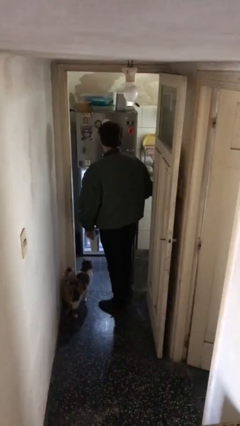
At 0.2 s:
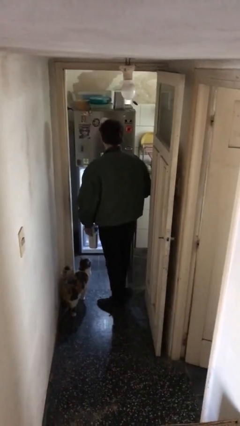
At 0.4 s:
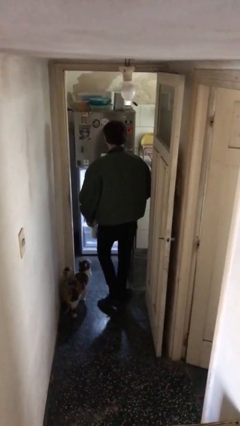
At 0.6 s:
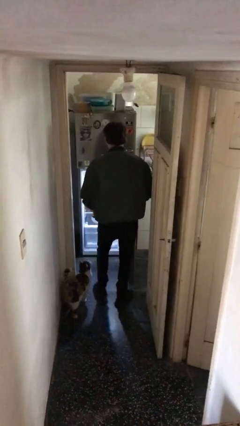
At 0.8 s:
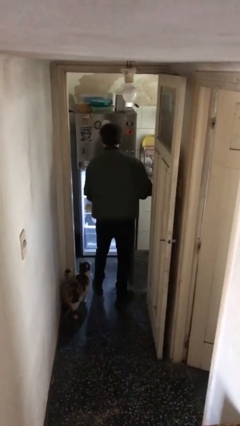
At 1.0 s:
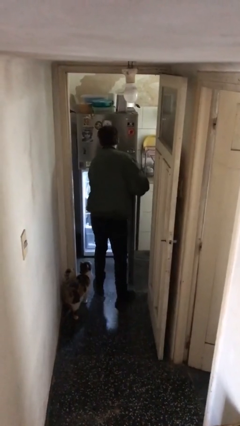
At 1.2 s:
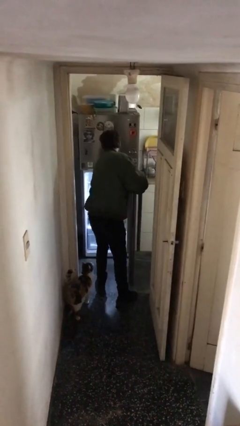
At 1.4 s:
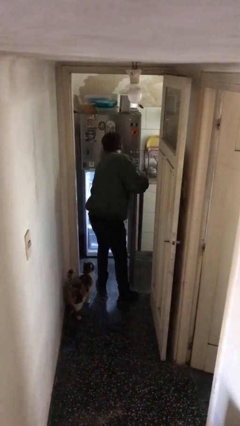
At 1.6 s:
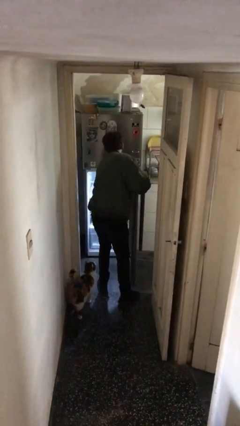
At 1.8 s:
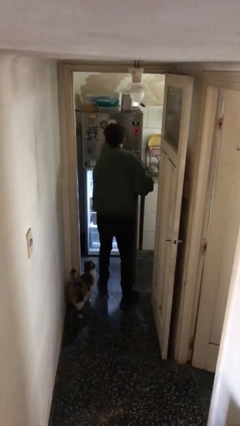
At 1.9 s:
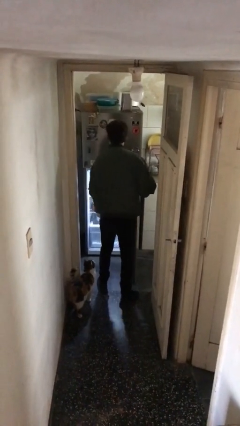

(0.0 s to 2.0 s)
person puts object into refrigerator

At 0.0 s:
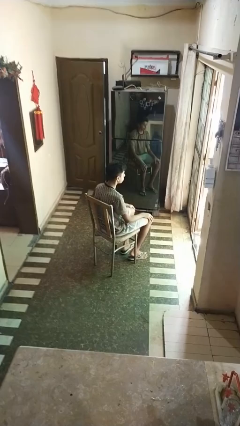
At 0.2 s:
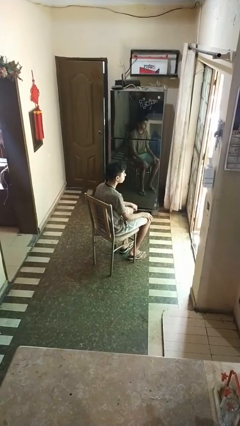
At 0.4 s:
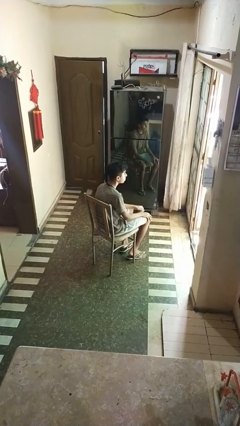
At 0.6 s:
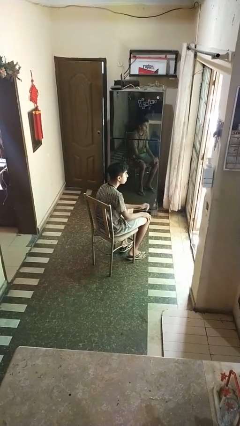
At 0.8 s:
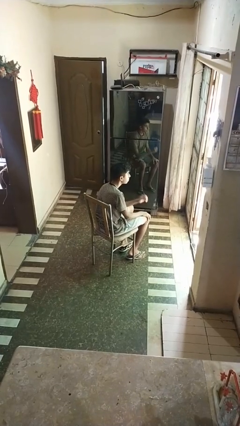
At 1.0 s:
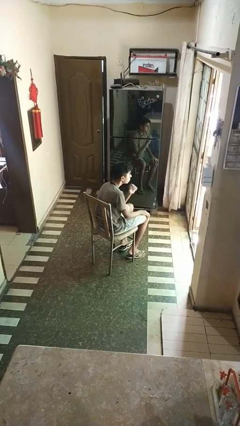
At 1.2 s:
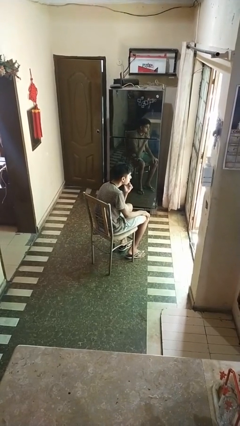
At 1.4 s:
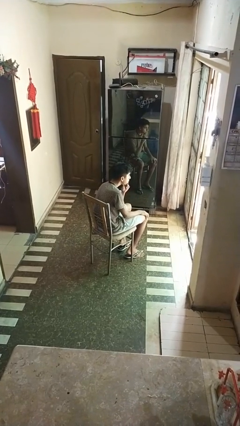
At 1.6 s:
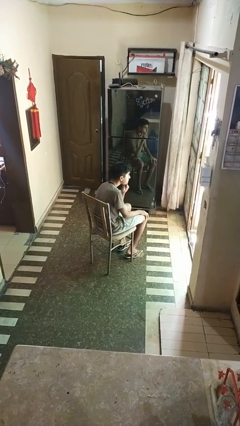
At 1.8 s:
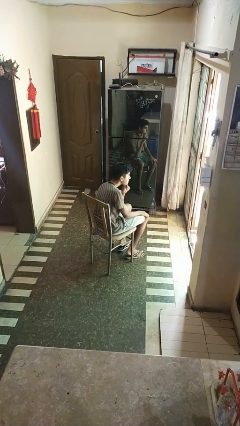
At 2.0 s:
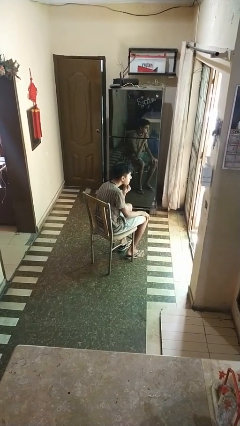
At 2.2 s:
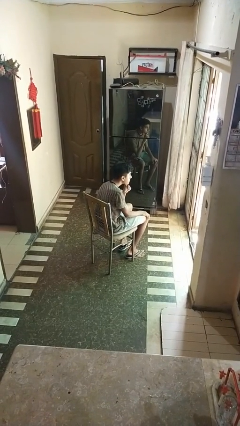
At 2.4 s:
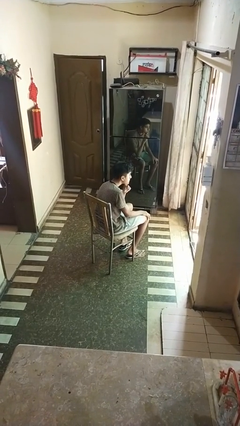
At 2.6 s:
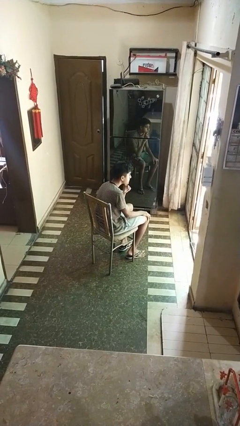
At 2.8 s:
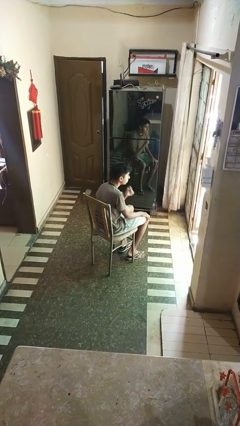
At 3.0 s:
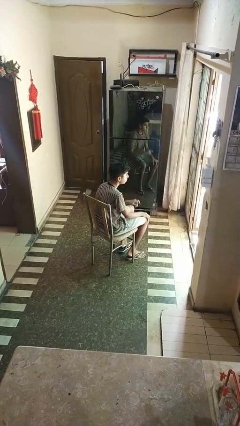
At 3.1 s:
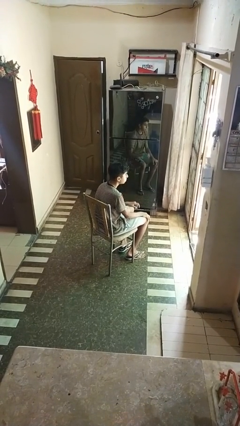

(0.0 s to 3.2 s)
person strokes chin

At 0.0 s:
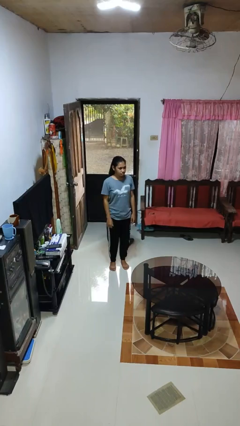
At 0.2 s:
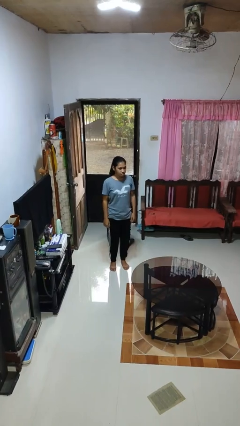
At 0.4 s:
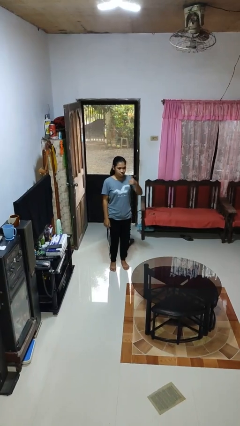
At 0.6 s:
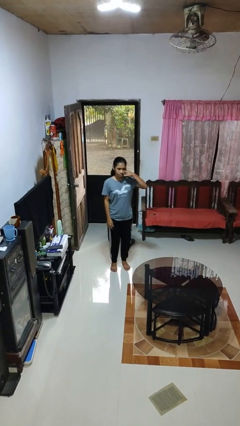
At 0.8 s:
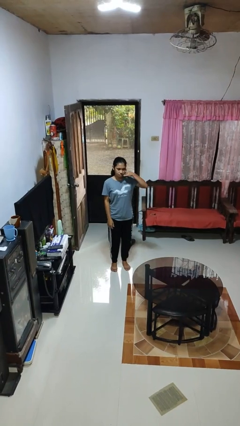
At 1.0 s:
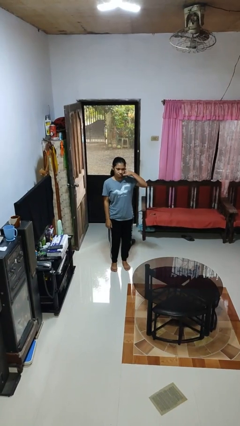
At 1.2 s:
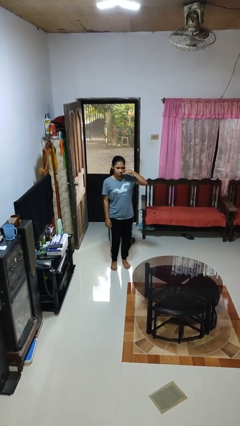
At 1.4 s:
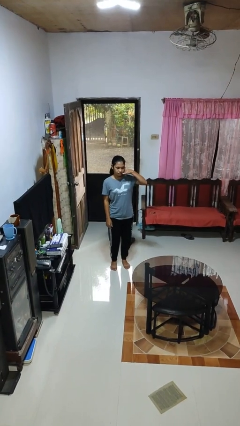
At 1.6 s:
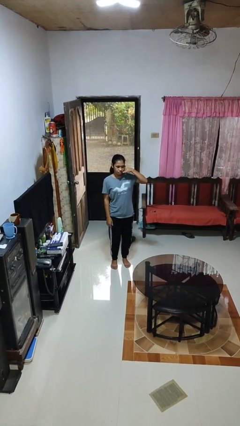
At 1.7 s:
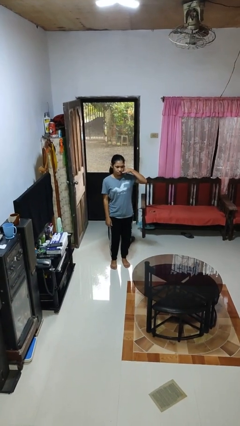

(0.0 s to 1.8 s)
person gestures call me

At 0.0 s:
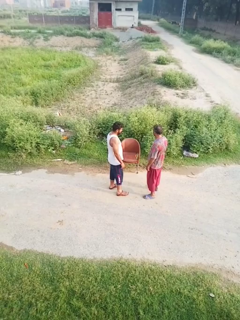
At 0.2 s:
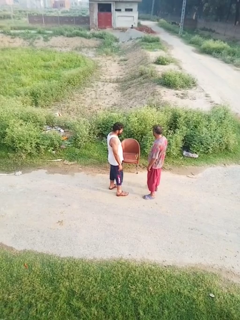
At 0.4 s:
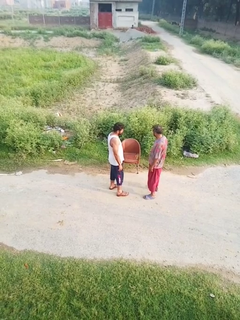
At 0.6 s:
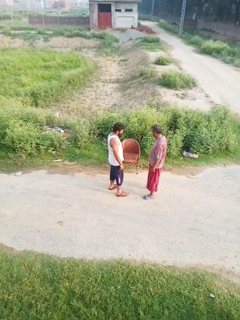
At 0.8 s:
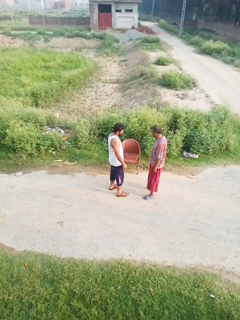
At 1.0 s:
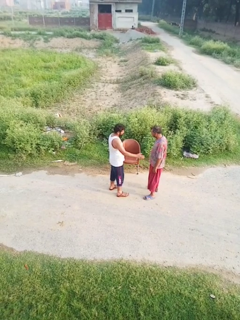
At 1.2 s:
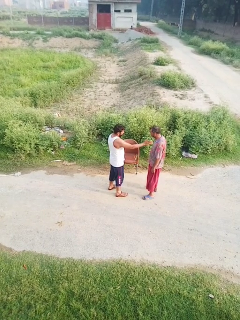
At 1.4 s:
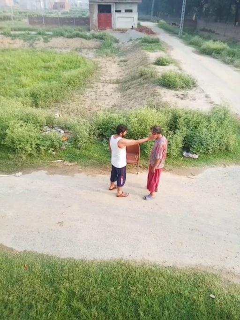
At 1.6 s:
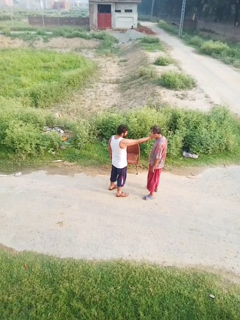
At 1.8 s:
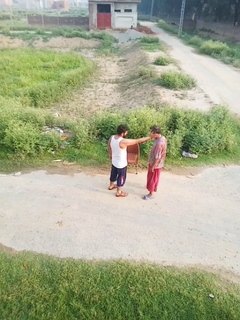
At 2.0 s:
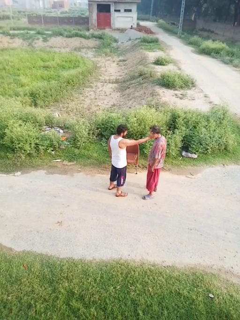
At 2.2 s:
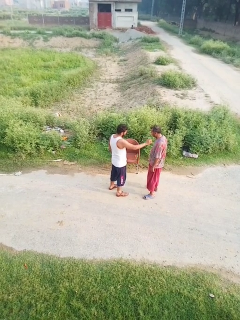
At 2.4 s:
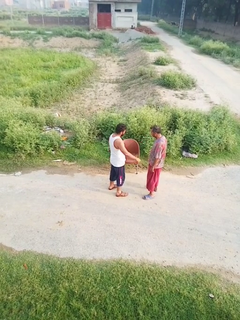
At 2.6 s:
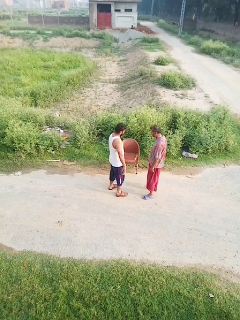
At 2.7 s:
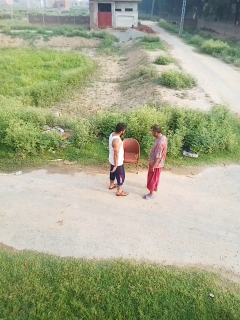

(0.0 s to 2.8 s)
person touches face of person

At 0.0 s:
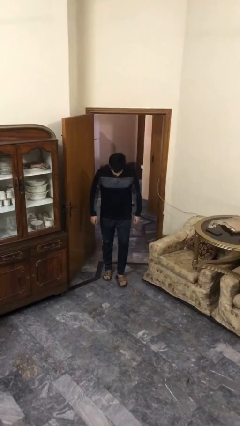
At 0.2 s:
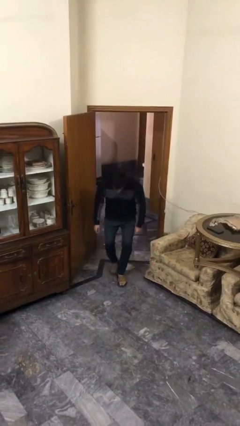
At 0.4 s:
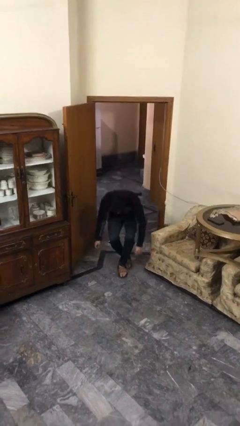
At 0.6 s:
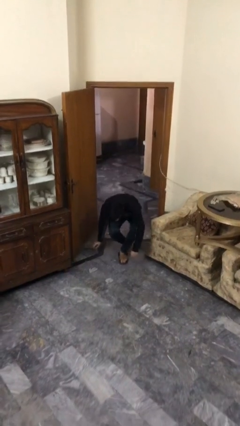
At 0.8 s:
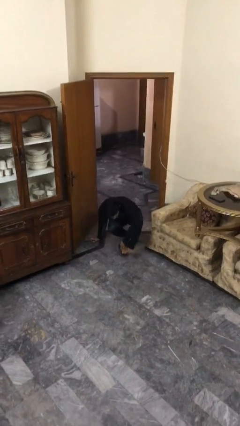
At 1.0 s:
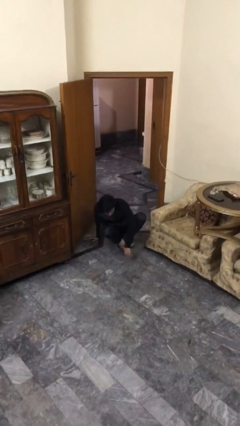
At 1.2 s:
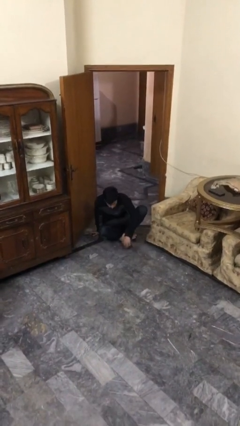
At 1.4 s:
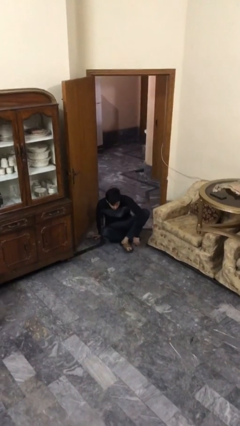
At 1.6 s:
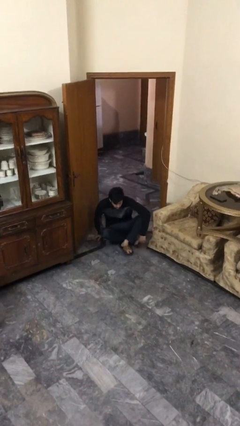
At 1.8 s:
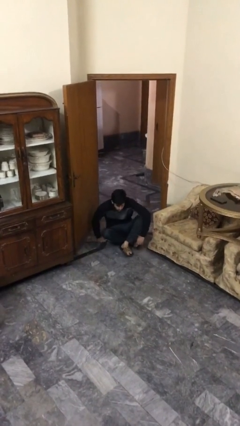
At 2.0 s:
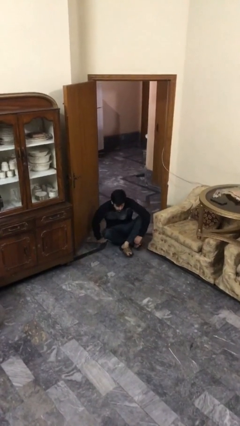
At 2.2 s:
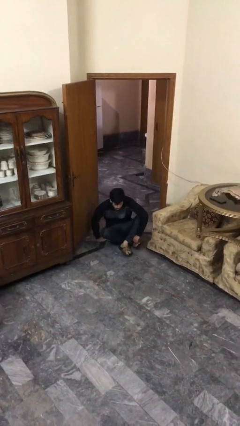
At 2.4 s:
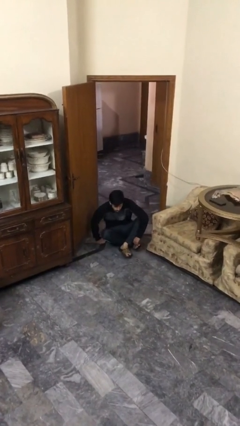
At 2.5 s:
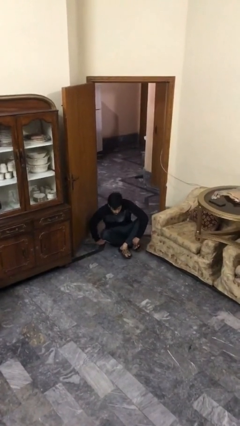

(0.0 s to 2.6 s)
person sits down

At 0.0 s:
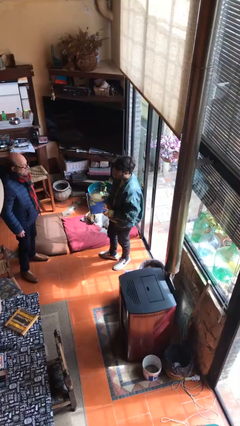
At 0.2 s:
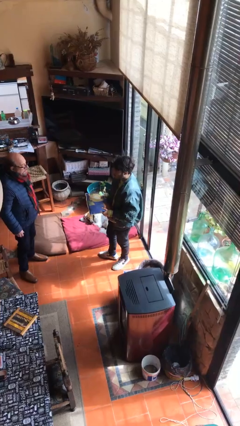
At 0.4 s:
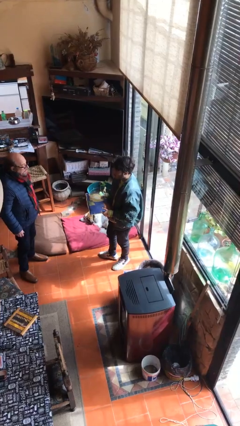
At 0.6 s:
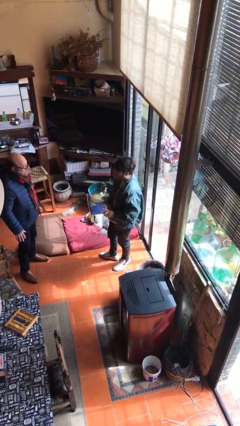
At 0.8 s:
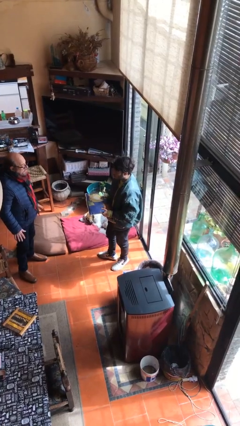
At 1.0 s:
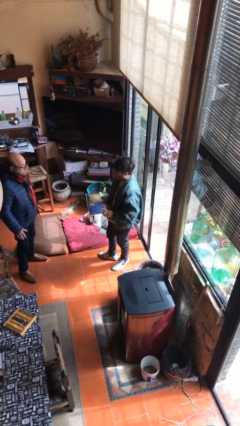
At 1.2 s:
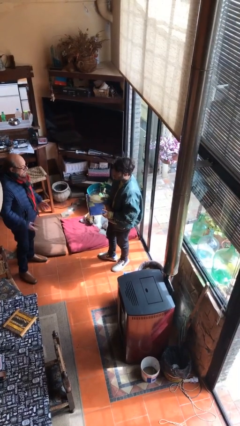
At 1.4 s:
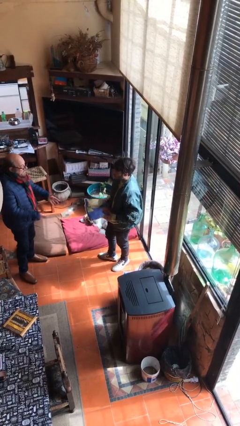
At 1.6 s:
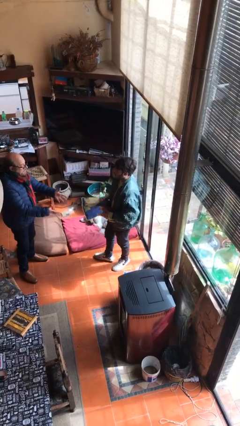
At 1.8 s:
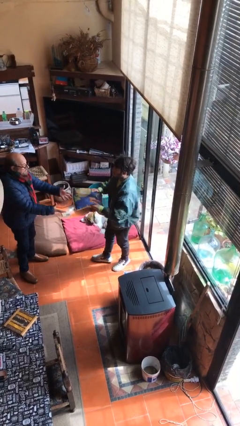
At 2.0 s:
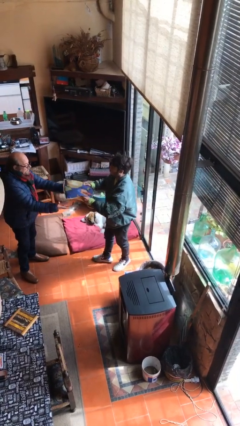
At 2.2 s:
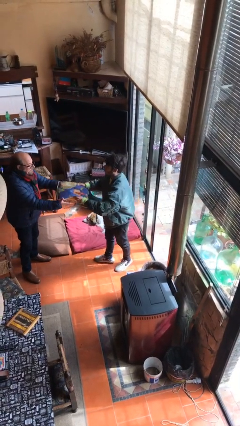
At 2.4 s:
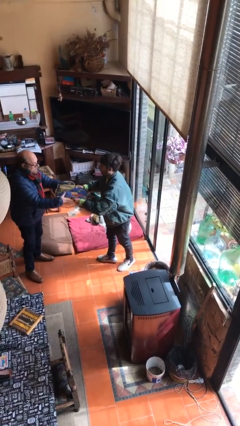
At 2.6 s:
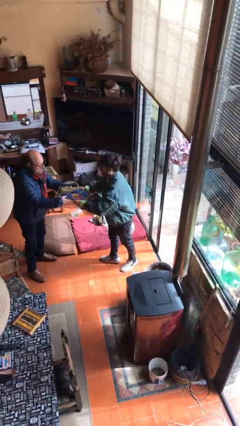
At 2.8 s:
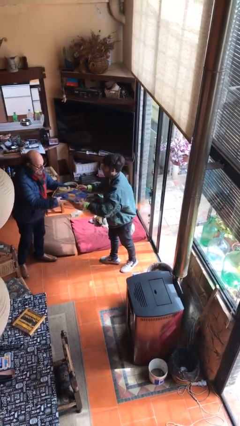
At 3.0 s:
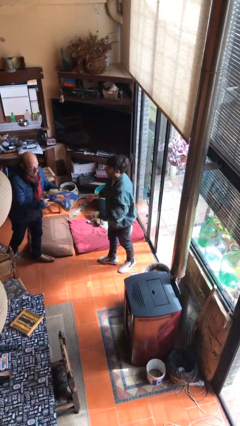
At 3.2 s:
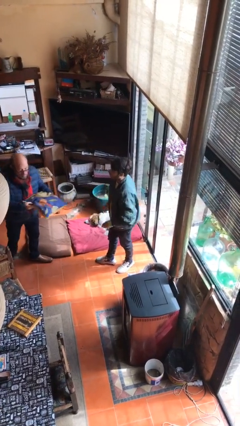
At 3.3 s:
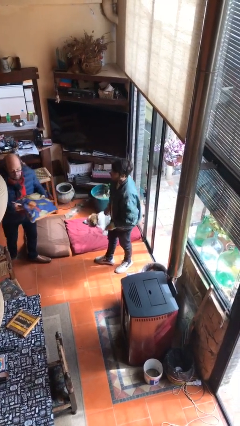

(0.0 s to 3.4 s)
person transfers object to person

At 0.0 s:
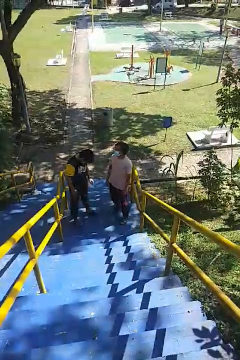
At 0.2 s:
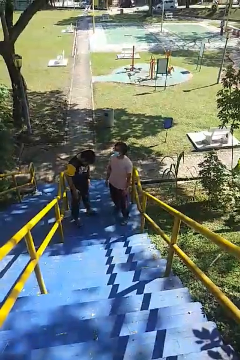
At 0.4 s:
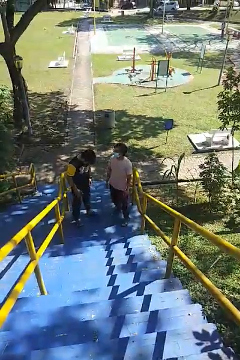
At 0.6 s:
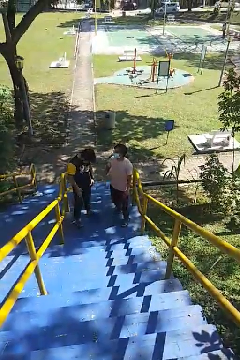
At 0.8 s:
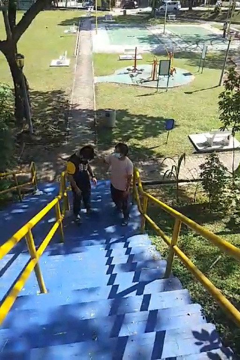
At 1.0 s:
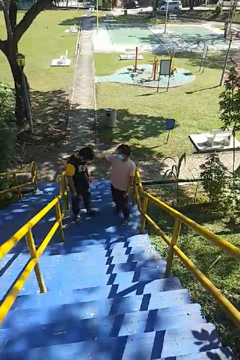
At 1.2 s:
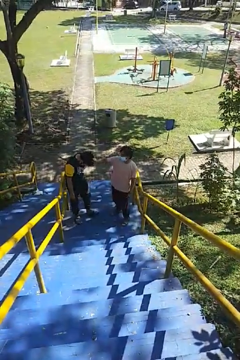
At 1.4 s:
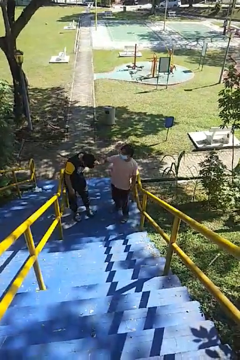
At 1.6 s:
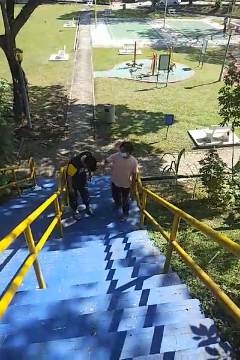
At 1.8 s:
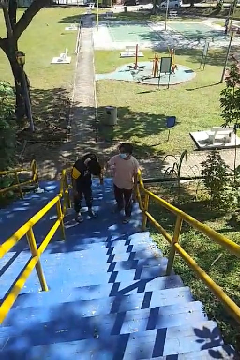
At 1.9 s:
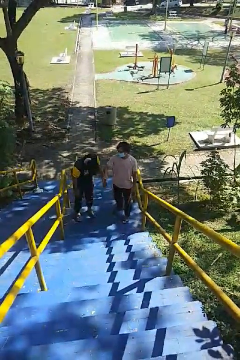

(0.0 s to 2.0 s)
person grabs person by hair
